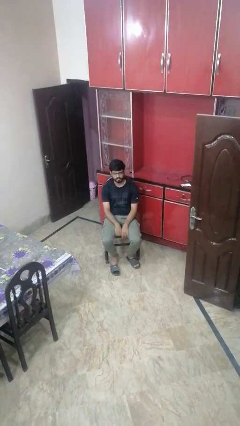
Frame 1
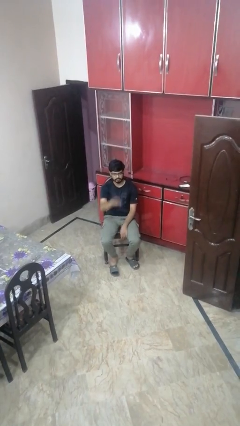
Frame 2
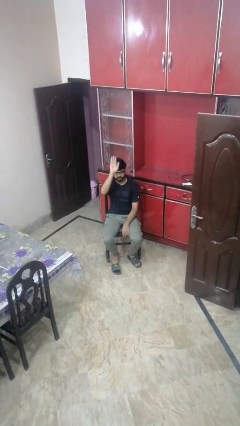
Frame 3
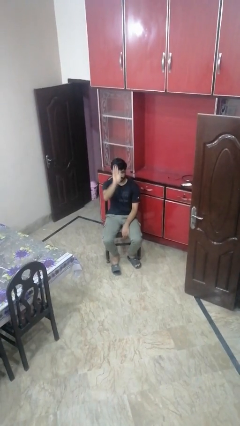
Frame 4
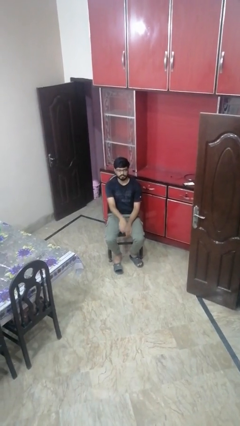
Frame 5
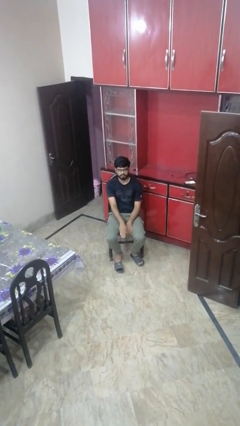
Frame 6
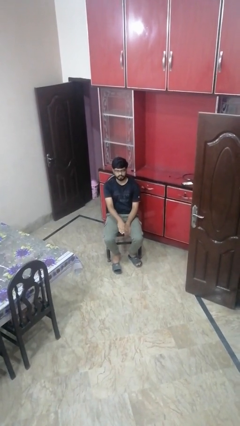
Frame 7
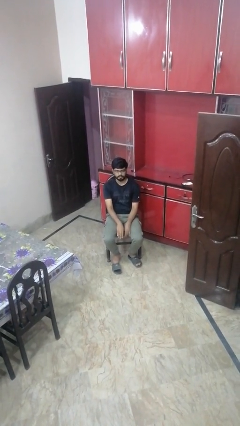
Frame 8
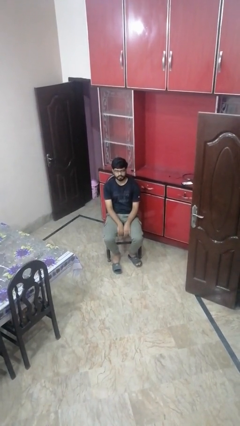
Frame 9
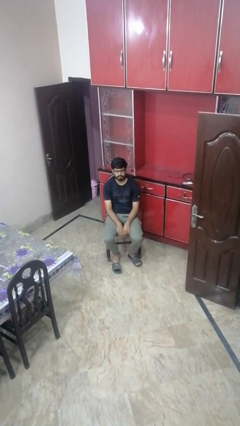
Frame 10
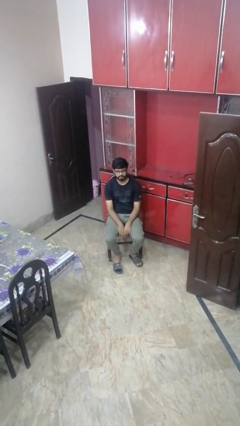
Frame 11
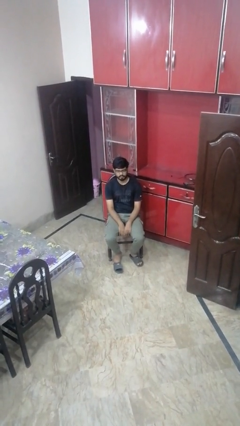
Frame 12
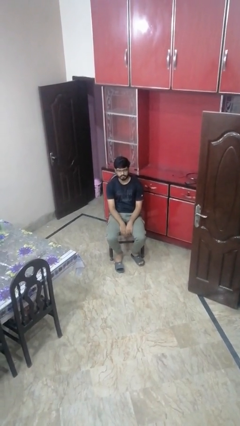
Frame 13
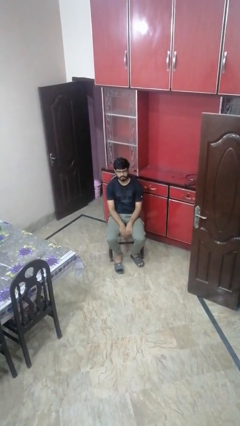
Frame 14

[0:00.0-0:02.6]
person gestures swipe down

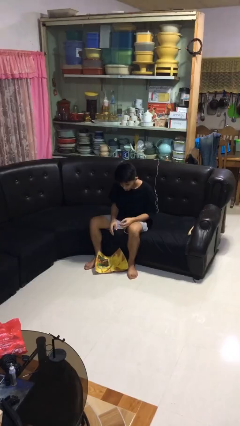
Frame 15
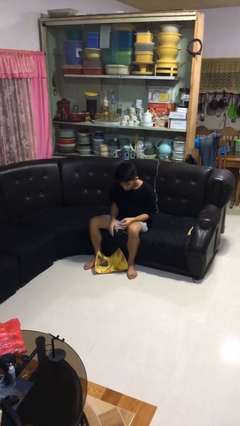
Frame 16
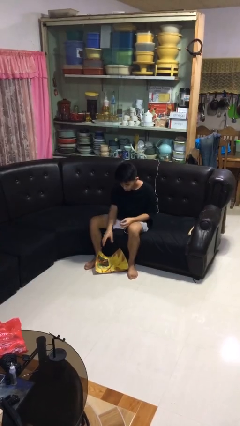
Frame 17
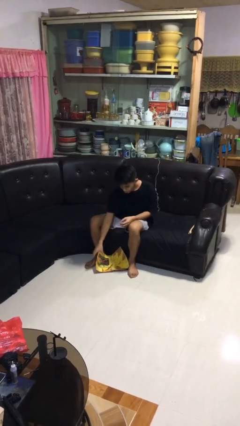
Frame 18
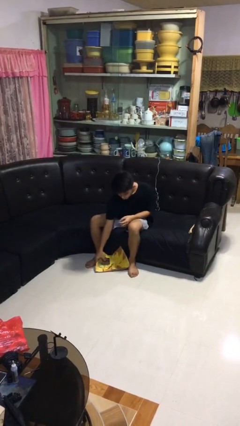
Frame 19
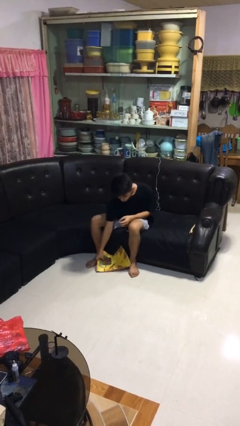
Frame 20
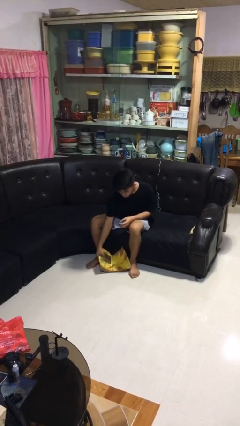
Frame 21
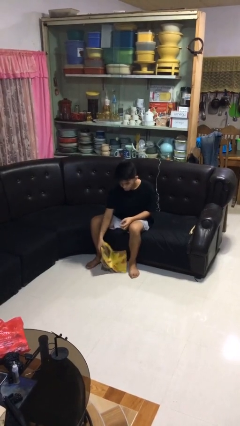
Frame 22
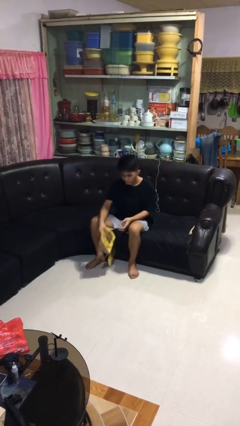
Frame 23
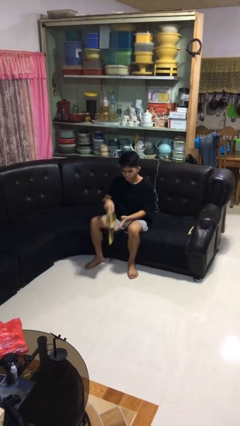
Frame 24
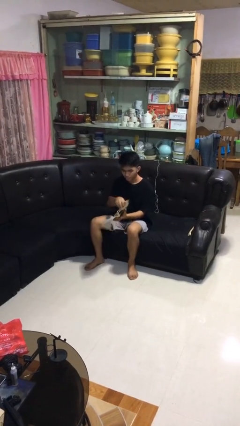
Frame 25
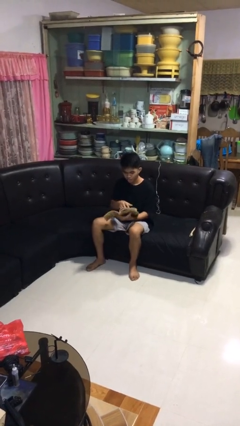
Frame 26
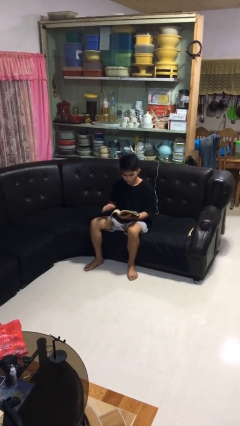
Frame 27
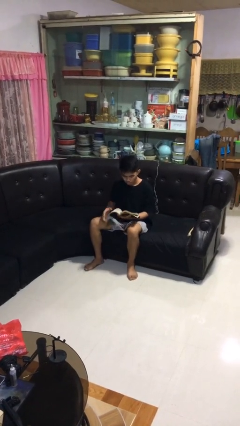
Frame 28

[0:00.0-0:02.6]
person picks up object from floor

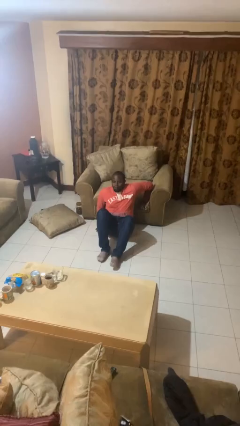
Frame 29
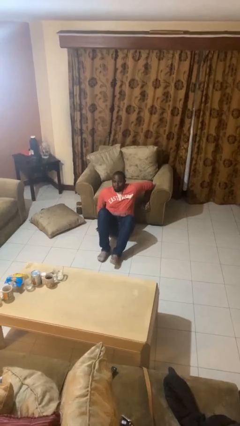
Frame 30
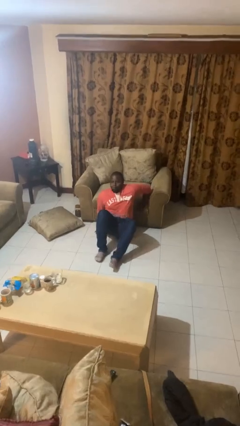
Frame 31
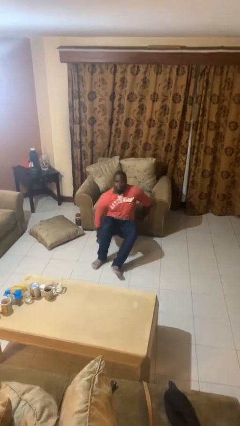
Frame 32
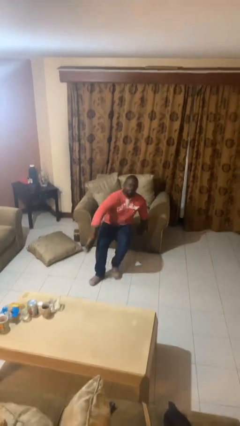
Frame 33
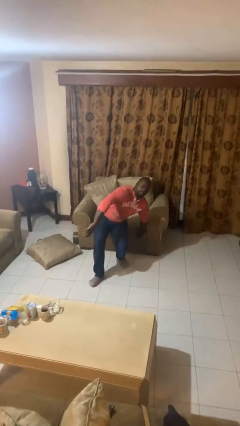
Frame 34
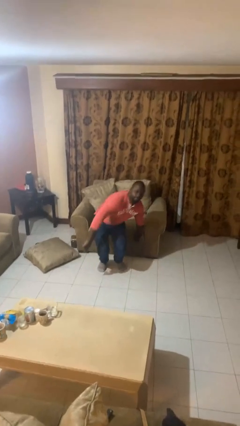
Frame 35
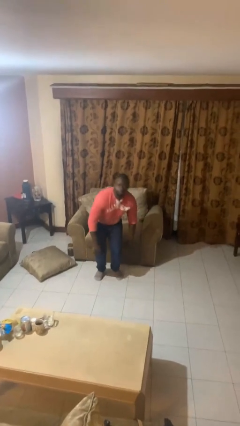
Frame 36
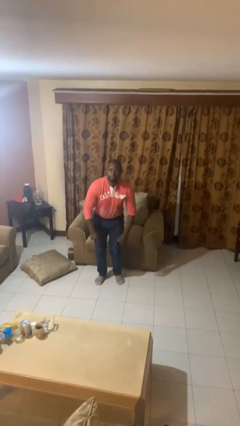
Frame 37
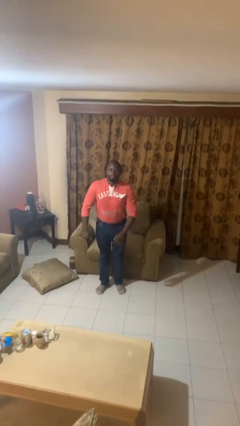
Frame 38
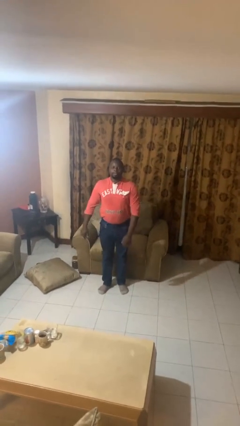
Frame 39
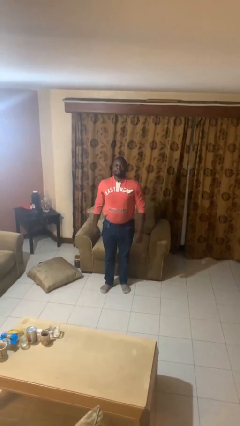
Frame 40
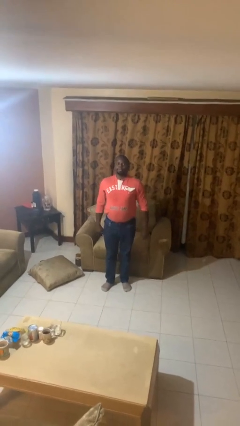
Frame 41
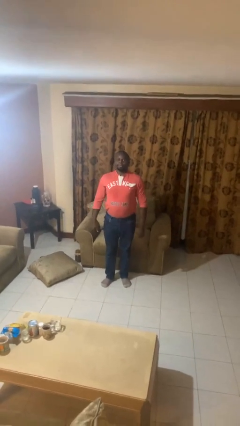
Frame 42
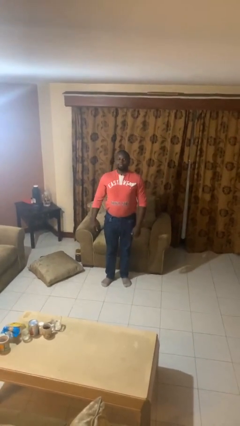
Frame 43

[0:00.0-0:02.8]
person stands up from floor

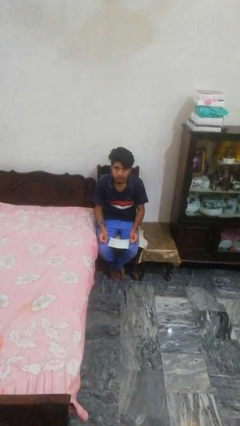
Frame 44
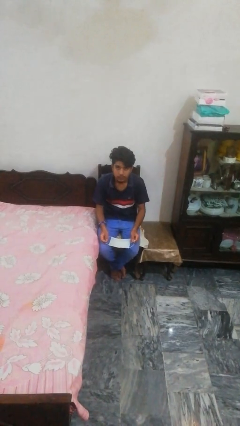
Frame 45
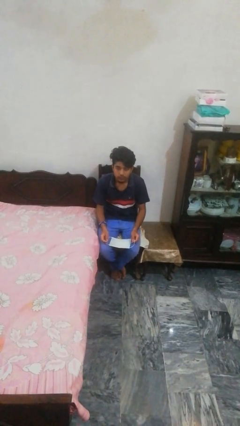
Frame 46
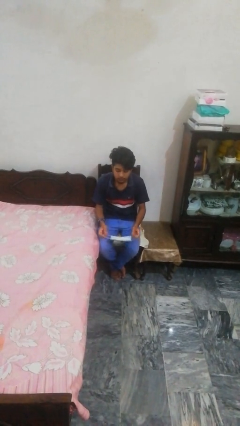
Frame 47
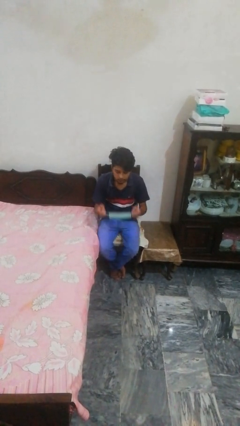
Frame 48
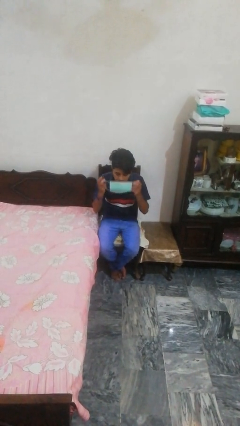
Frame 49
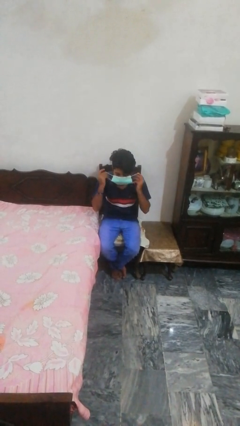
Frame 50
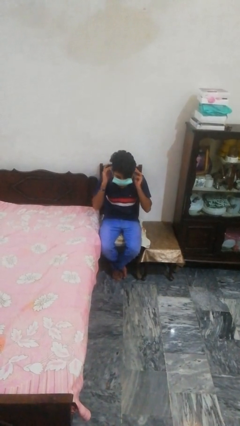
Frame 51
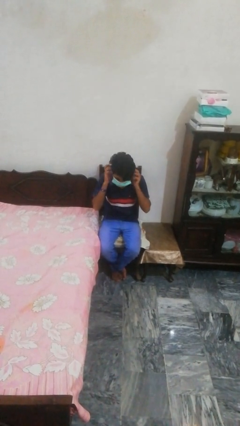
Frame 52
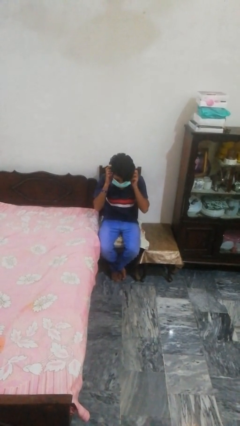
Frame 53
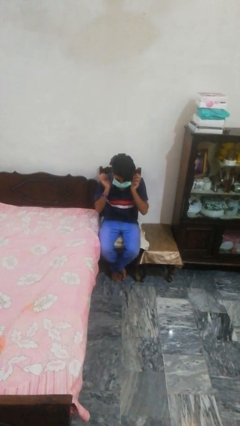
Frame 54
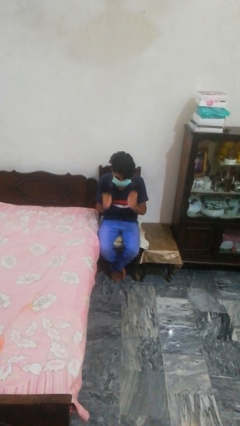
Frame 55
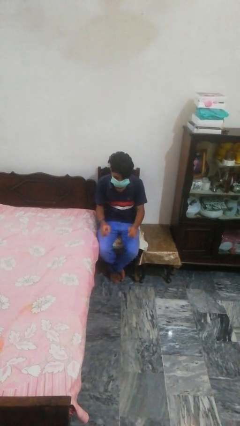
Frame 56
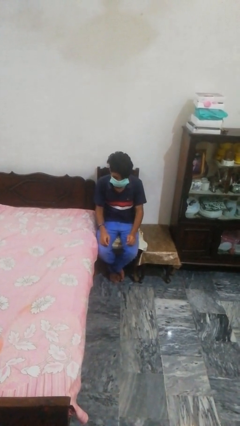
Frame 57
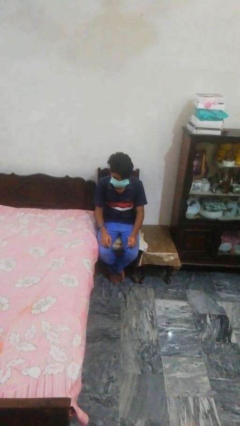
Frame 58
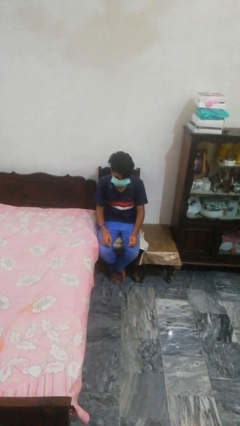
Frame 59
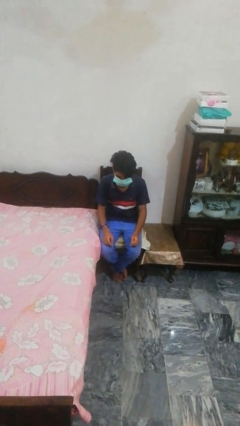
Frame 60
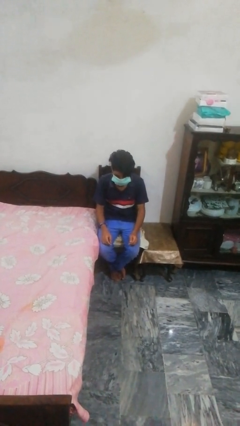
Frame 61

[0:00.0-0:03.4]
person puts on facemask

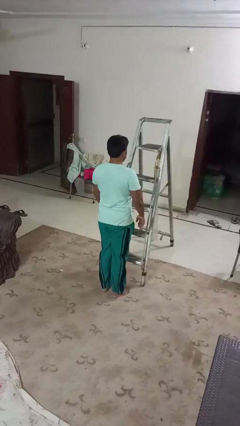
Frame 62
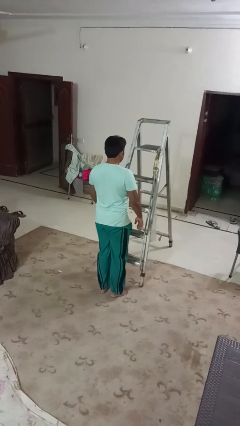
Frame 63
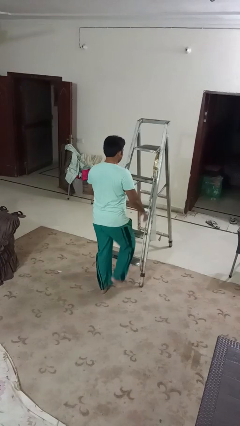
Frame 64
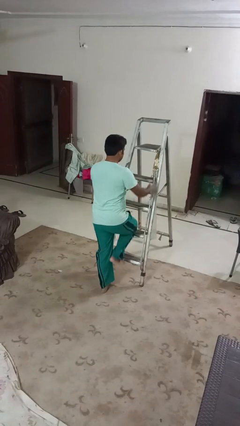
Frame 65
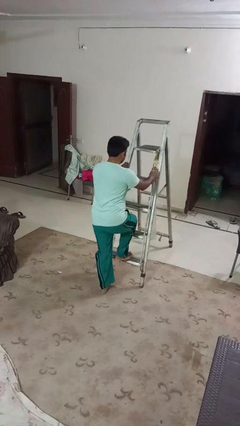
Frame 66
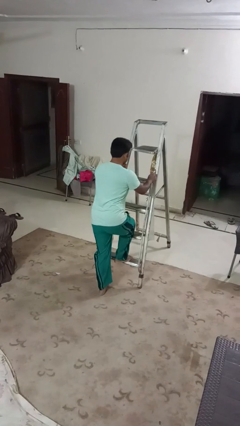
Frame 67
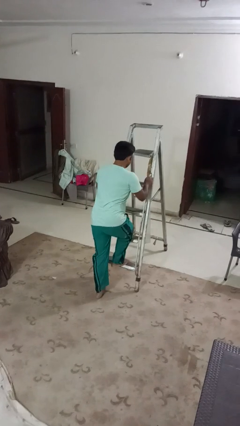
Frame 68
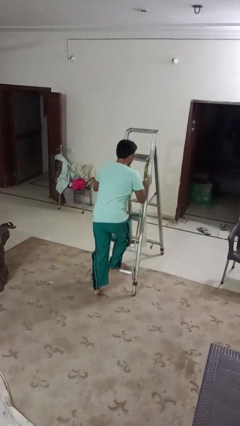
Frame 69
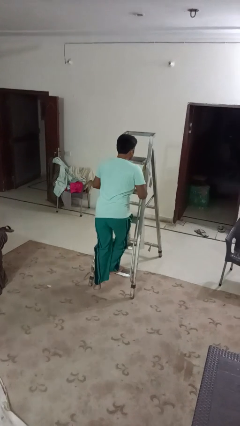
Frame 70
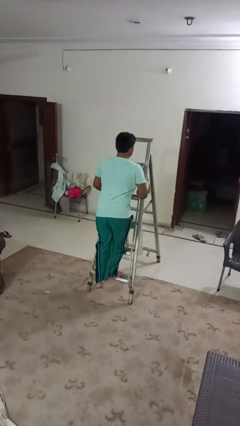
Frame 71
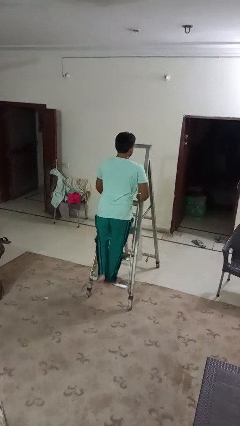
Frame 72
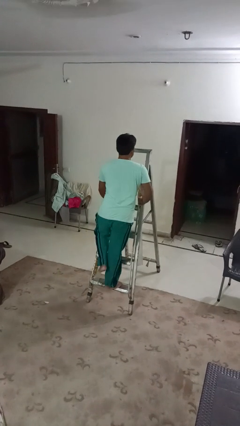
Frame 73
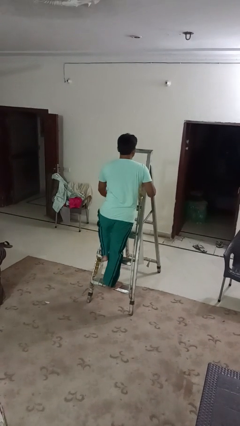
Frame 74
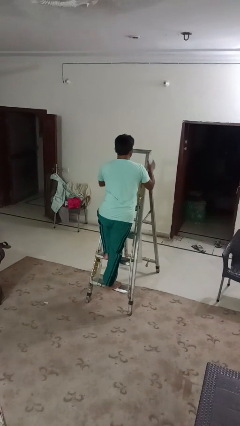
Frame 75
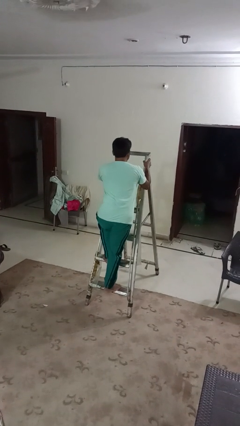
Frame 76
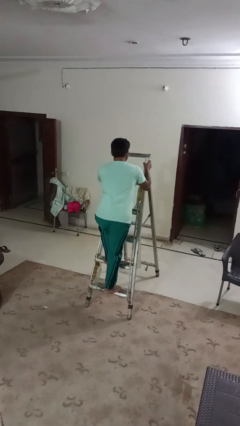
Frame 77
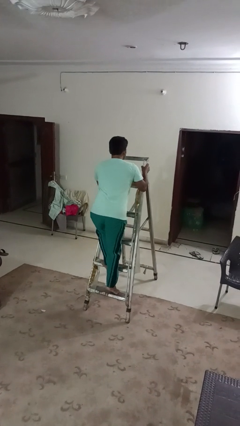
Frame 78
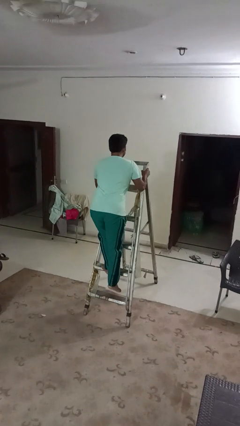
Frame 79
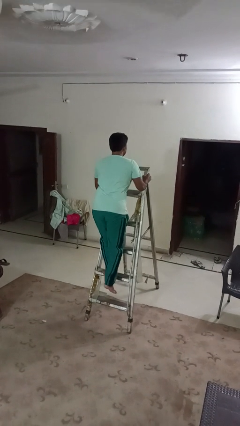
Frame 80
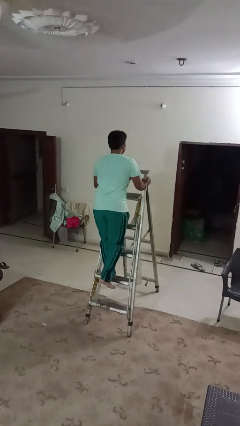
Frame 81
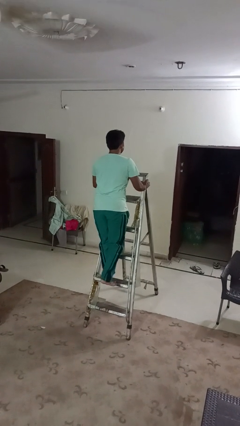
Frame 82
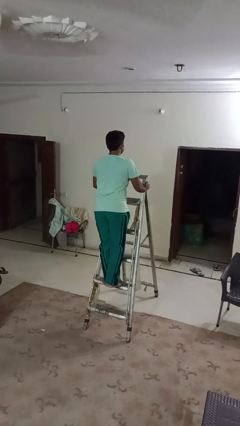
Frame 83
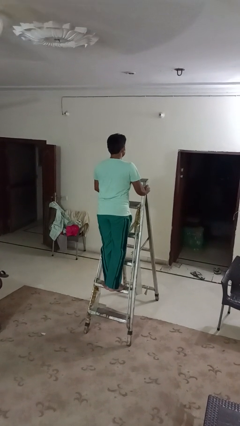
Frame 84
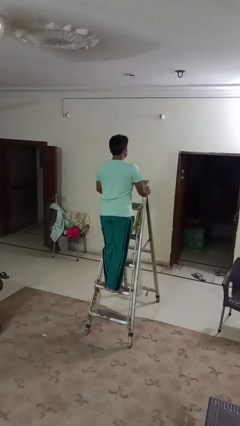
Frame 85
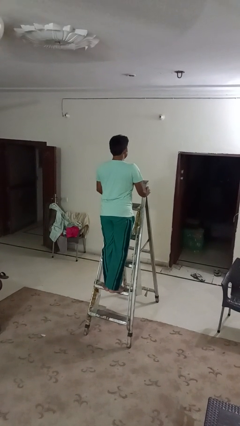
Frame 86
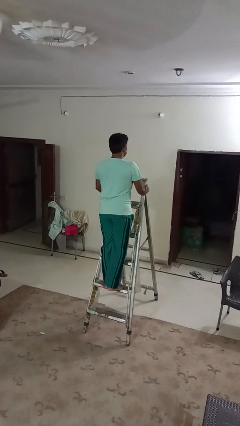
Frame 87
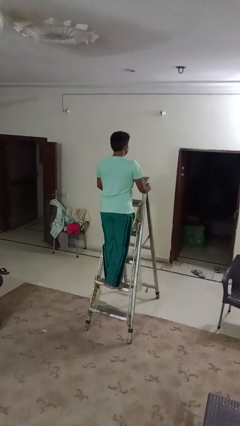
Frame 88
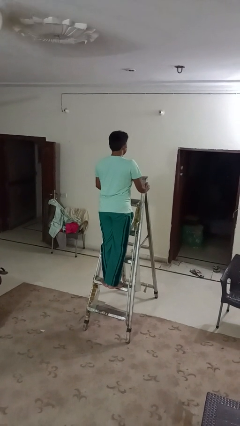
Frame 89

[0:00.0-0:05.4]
person climbs up ladder

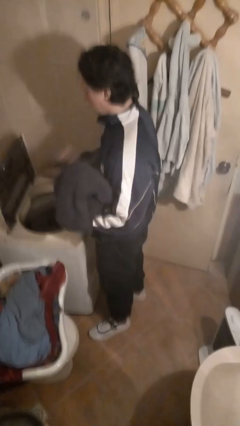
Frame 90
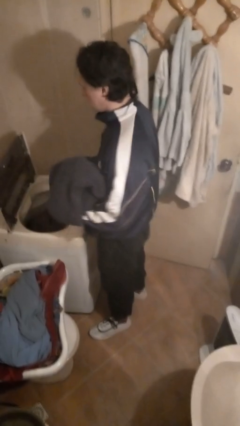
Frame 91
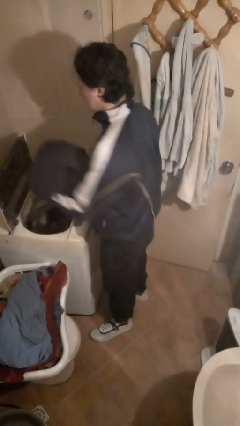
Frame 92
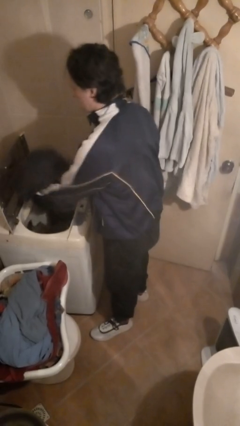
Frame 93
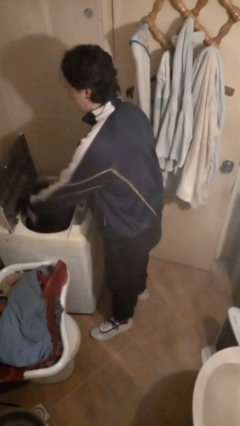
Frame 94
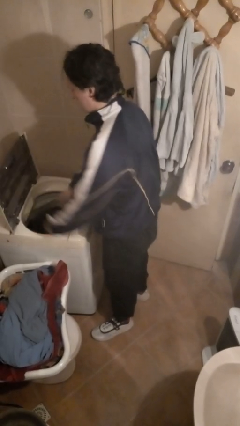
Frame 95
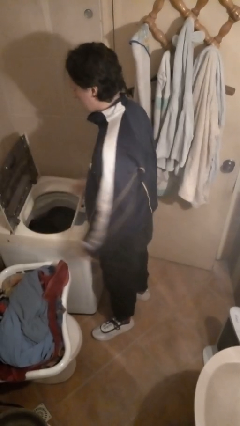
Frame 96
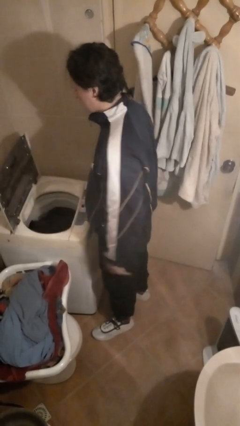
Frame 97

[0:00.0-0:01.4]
person loads clotheswasher
